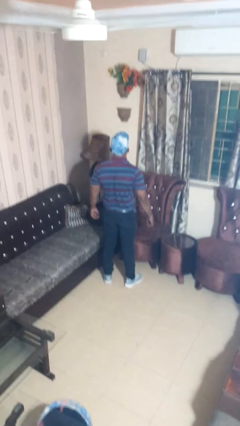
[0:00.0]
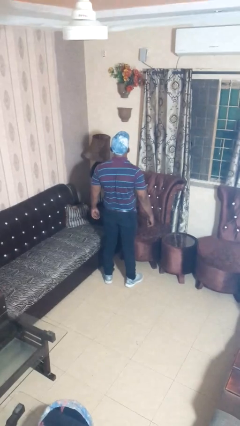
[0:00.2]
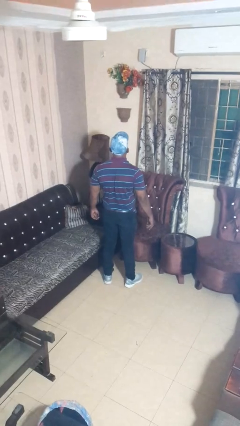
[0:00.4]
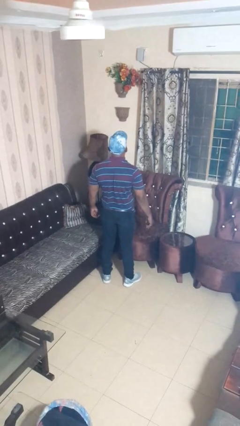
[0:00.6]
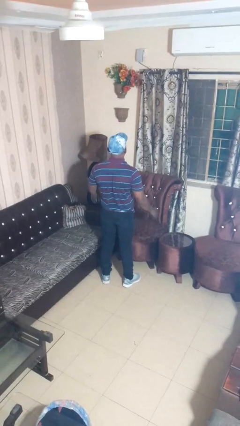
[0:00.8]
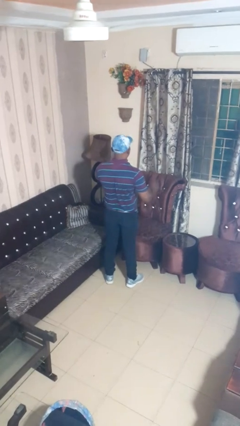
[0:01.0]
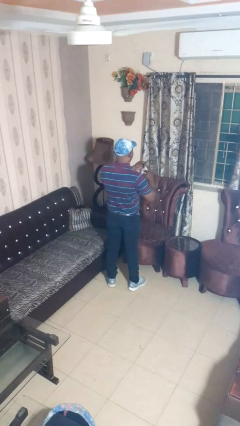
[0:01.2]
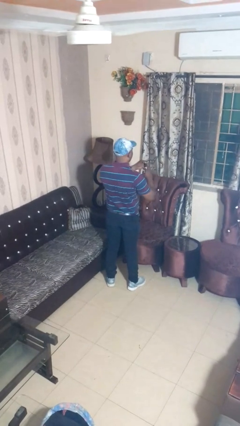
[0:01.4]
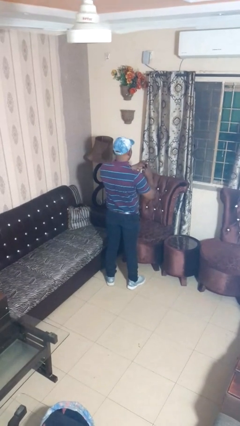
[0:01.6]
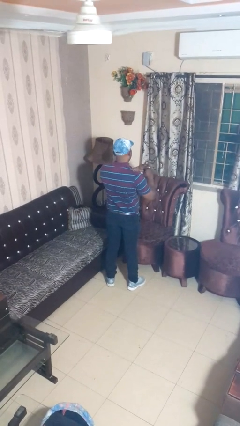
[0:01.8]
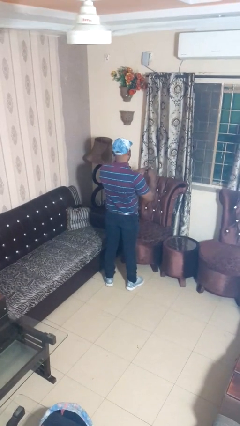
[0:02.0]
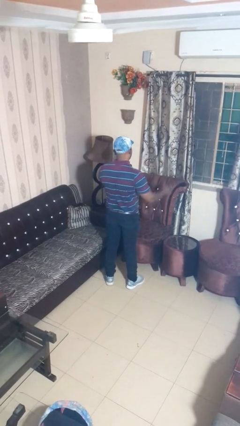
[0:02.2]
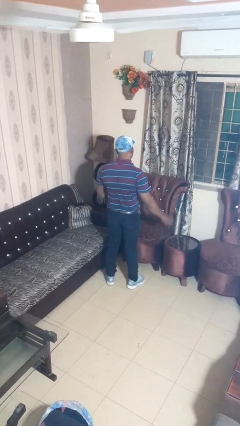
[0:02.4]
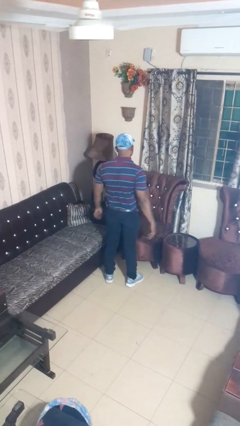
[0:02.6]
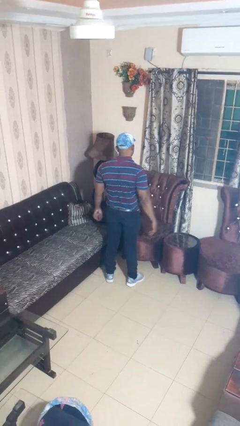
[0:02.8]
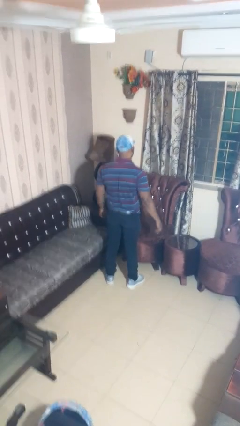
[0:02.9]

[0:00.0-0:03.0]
person puts on ring

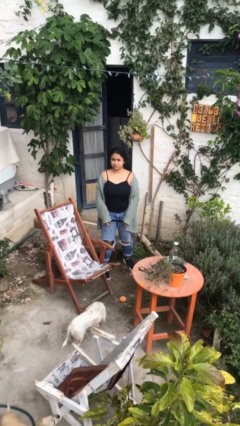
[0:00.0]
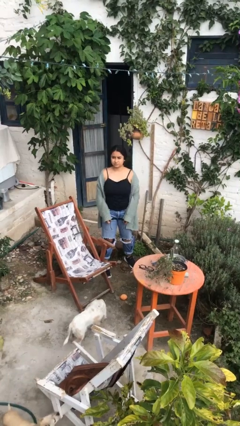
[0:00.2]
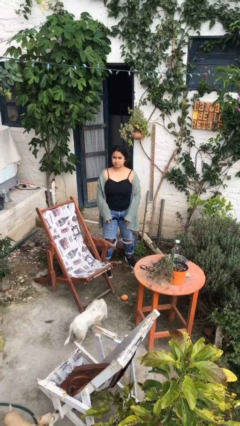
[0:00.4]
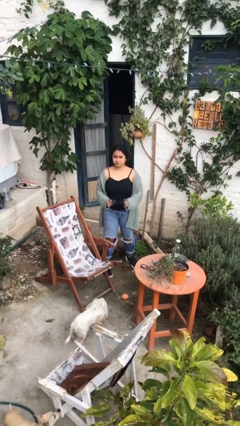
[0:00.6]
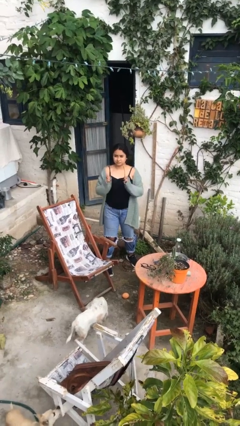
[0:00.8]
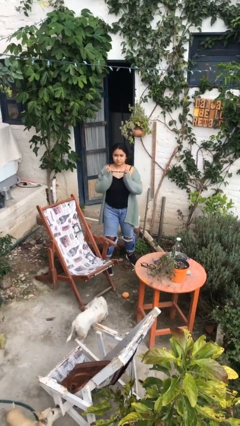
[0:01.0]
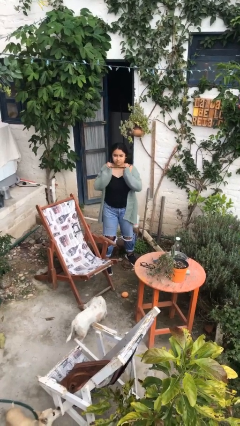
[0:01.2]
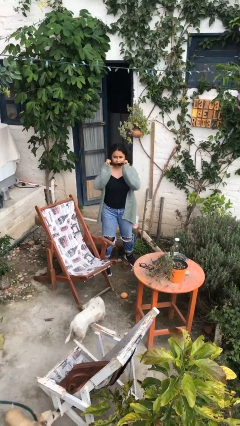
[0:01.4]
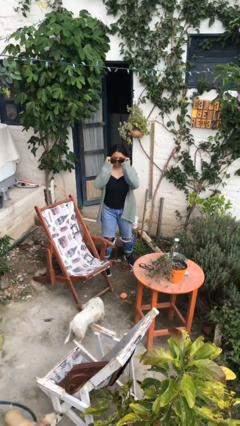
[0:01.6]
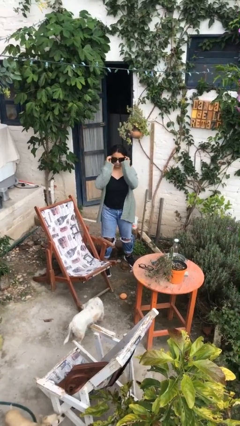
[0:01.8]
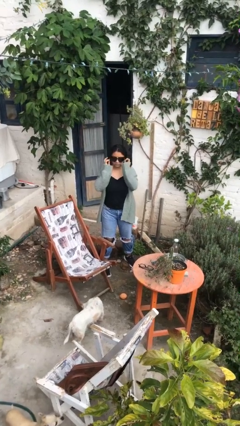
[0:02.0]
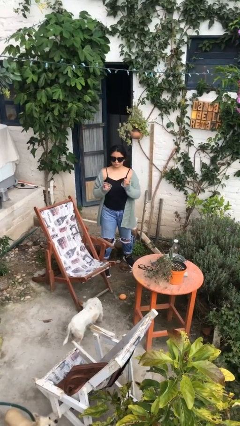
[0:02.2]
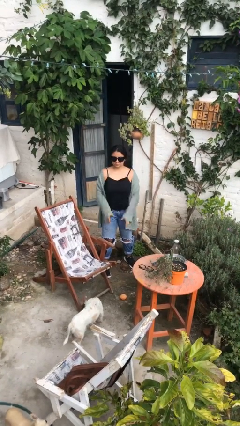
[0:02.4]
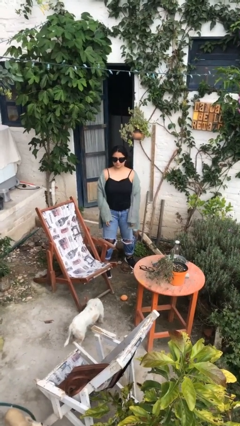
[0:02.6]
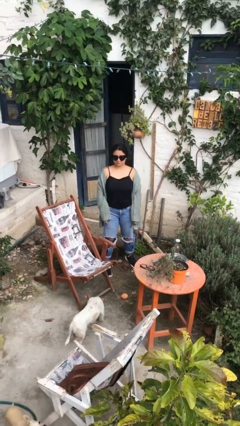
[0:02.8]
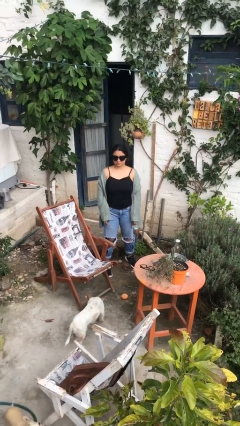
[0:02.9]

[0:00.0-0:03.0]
person puts on sunglasses

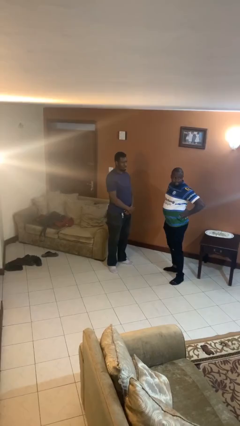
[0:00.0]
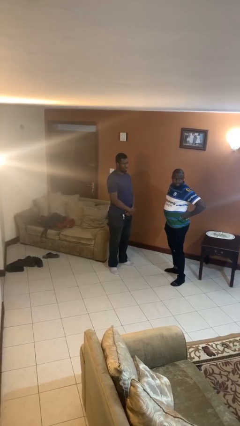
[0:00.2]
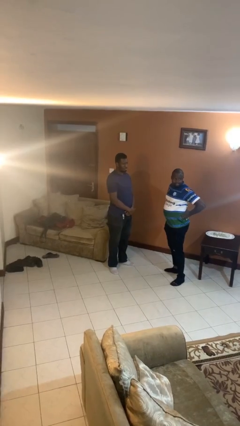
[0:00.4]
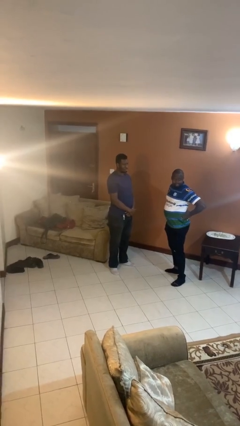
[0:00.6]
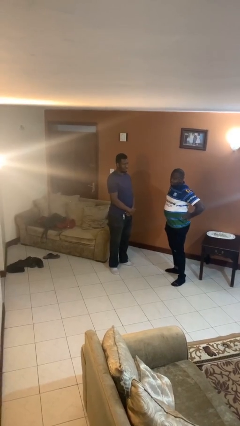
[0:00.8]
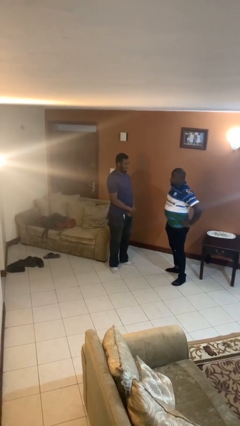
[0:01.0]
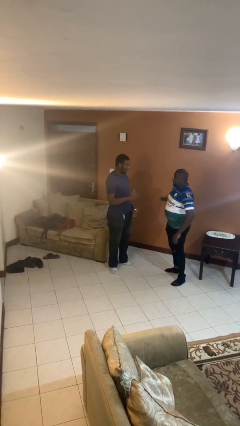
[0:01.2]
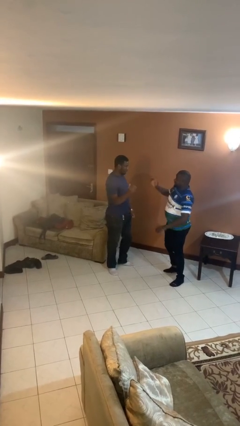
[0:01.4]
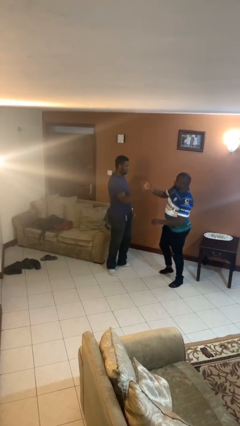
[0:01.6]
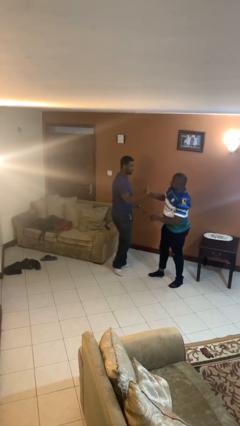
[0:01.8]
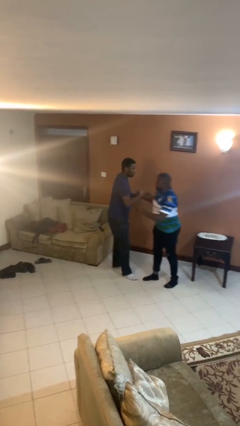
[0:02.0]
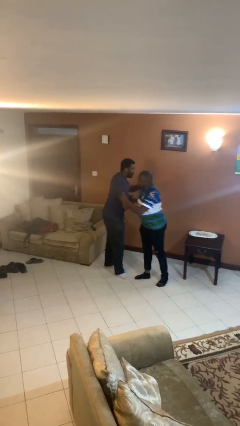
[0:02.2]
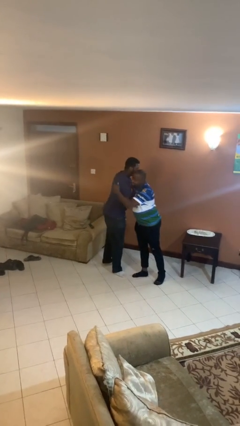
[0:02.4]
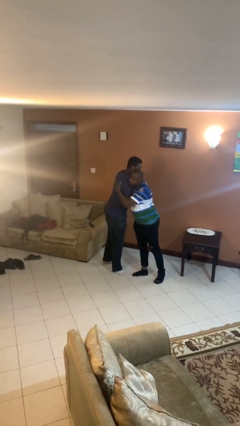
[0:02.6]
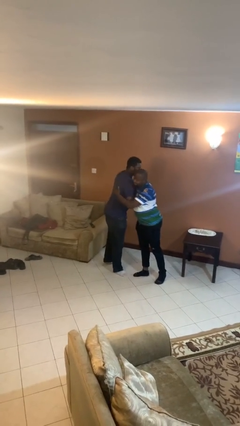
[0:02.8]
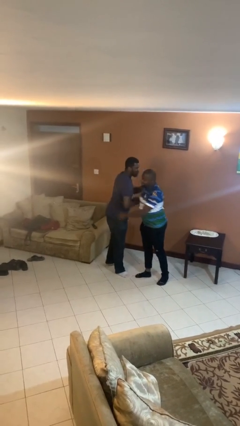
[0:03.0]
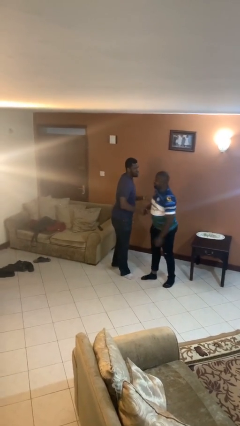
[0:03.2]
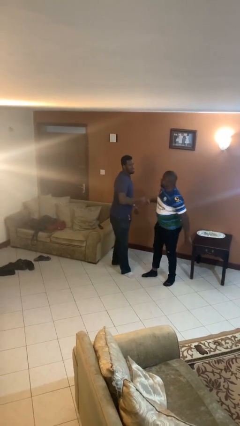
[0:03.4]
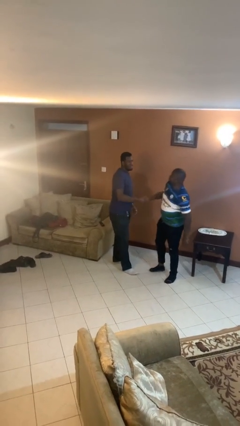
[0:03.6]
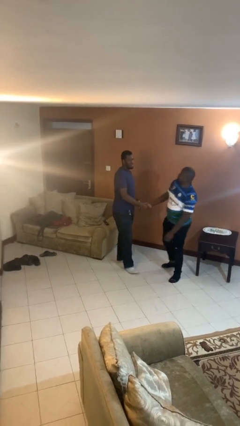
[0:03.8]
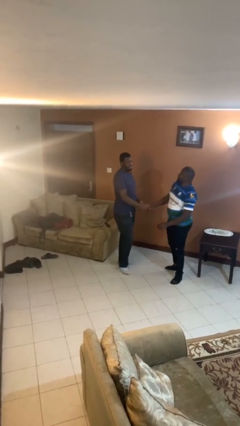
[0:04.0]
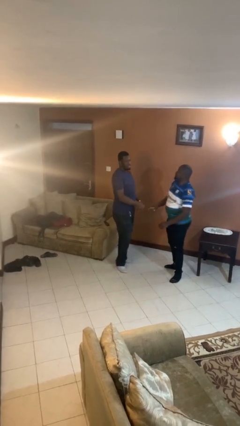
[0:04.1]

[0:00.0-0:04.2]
person embraces person

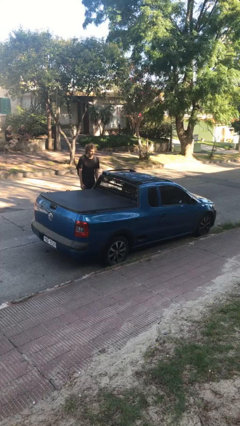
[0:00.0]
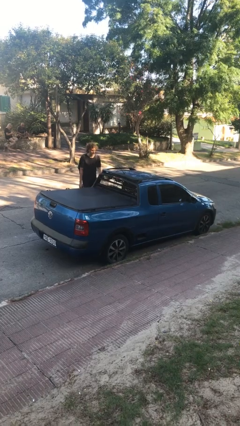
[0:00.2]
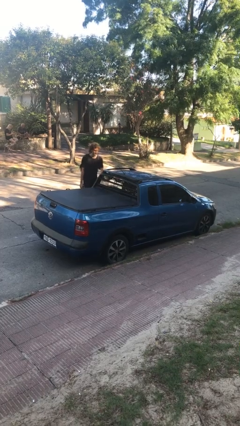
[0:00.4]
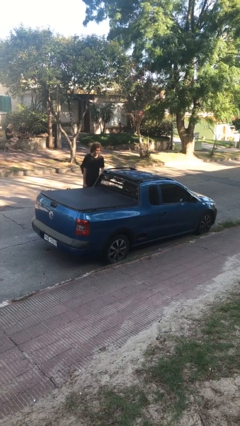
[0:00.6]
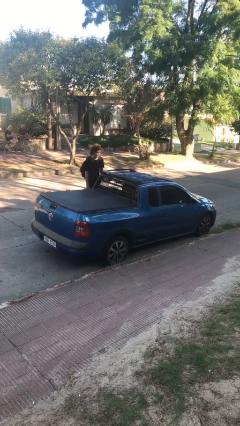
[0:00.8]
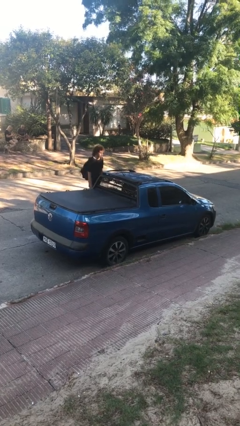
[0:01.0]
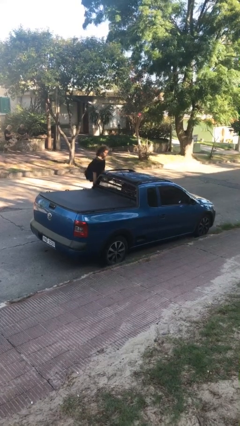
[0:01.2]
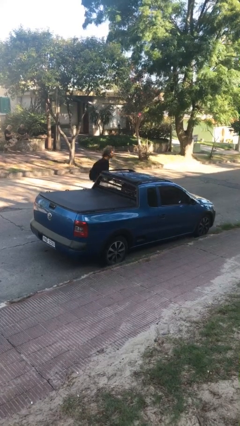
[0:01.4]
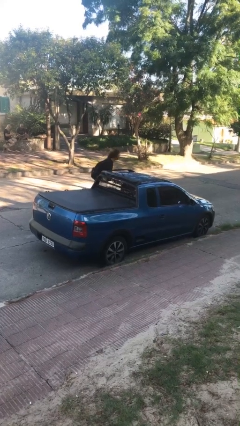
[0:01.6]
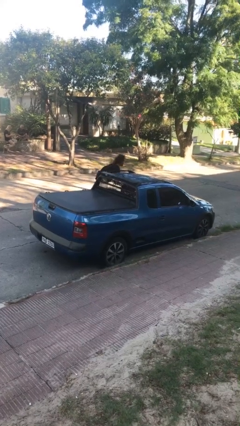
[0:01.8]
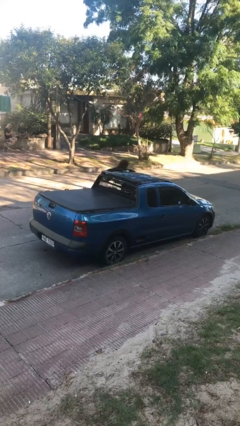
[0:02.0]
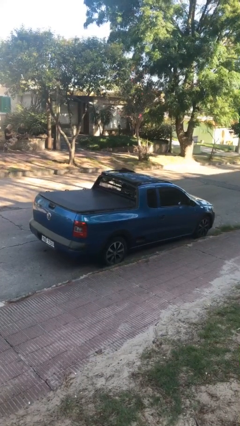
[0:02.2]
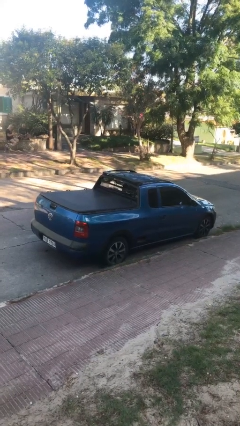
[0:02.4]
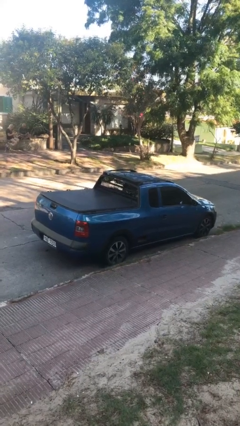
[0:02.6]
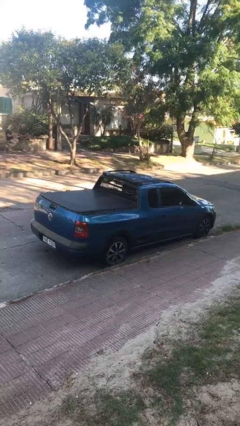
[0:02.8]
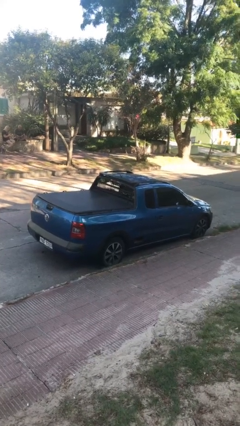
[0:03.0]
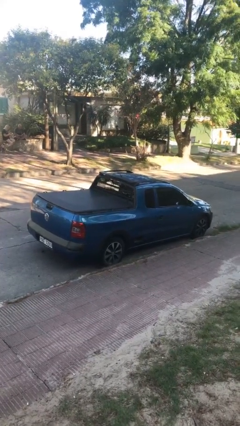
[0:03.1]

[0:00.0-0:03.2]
car picks up person

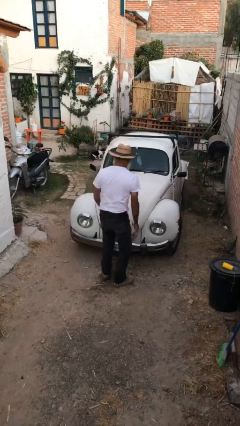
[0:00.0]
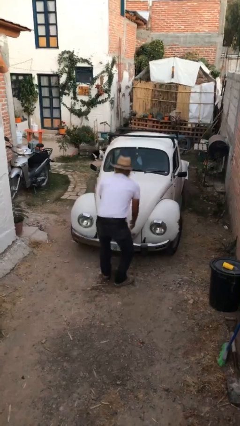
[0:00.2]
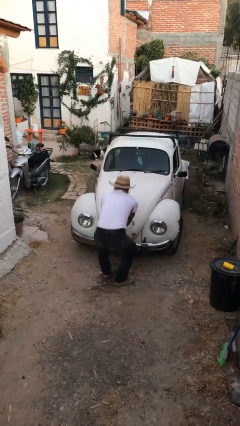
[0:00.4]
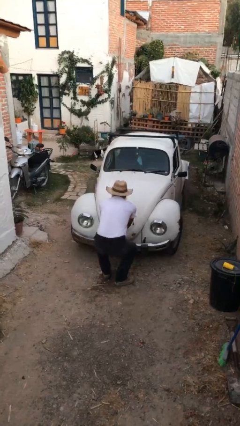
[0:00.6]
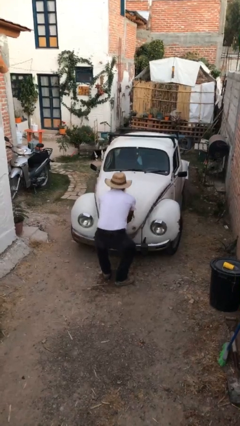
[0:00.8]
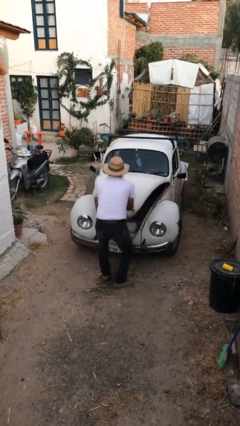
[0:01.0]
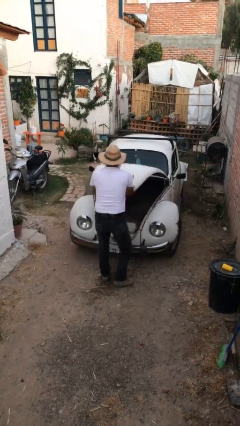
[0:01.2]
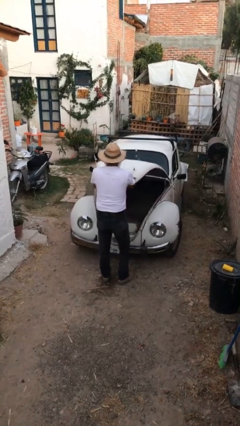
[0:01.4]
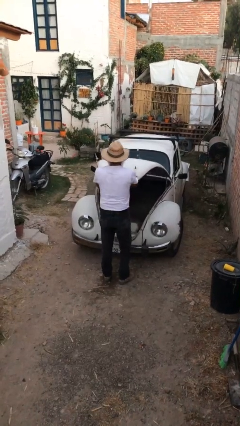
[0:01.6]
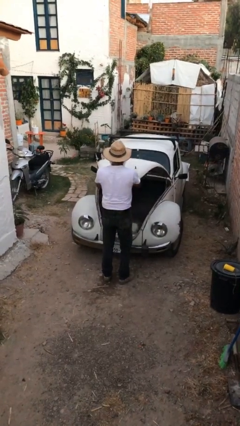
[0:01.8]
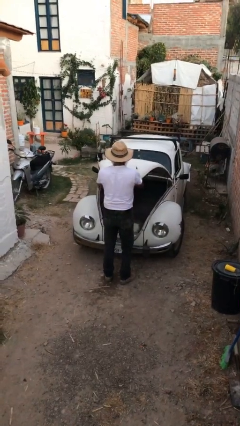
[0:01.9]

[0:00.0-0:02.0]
person opens car trunk

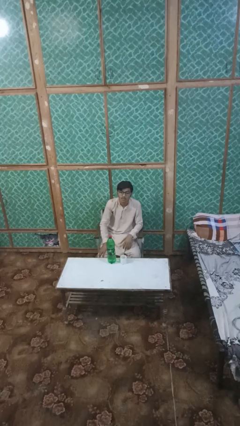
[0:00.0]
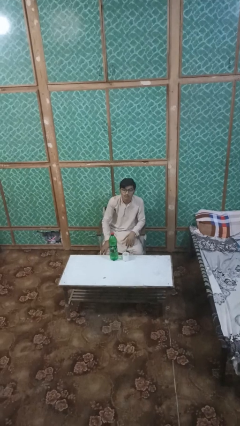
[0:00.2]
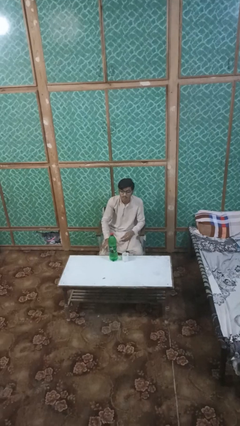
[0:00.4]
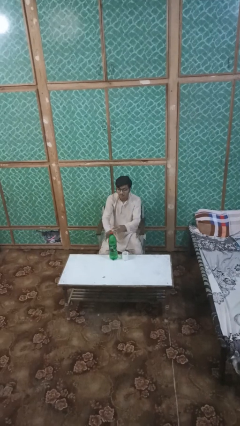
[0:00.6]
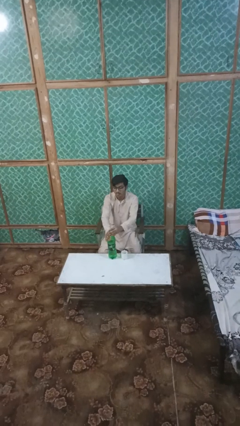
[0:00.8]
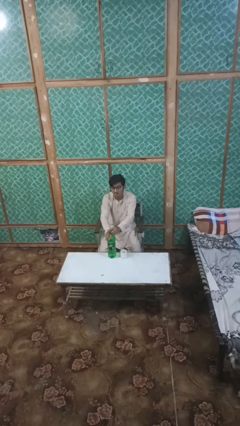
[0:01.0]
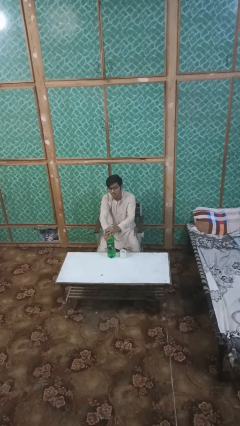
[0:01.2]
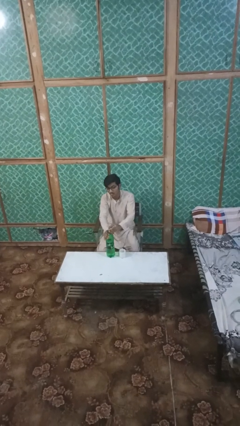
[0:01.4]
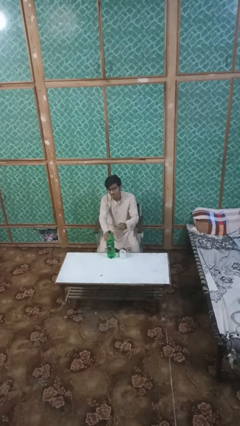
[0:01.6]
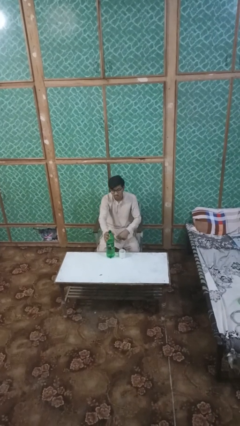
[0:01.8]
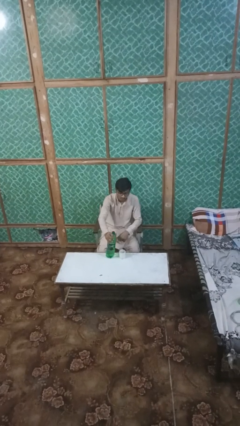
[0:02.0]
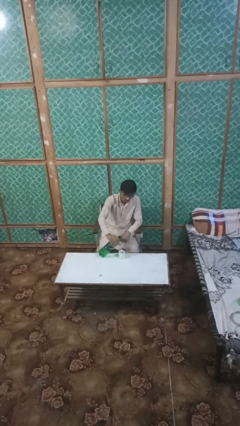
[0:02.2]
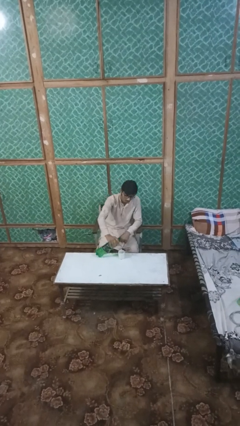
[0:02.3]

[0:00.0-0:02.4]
person unscrews lid from bottle
